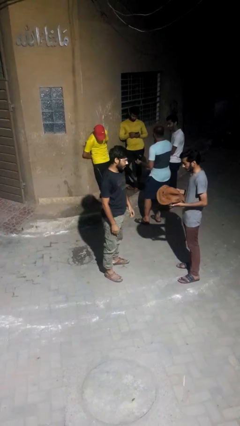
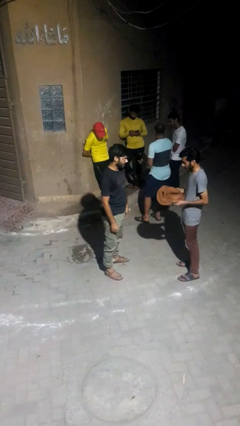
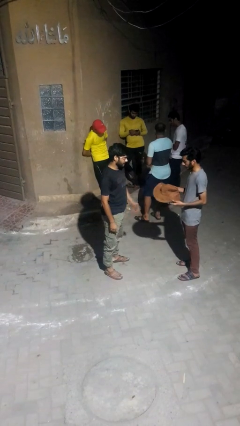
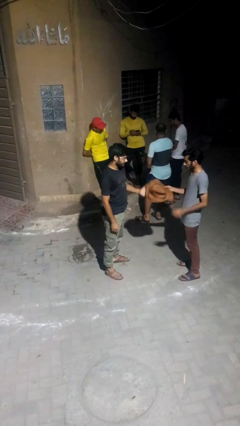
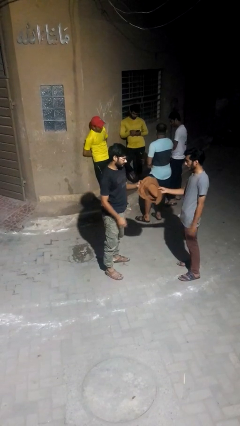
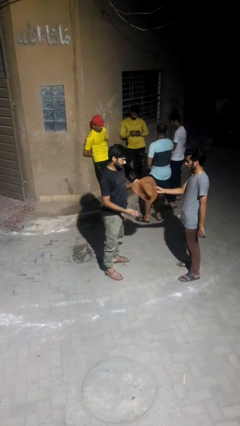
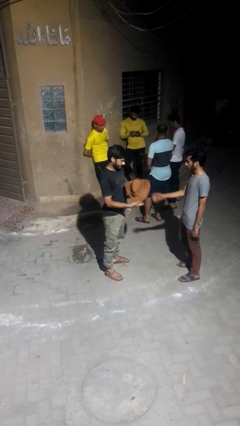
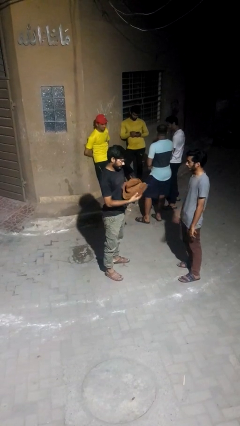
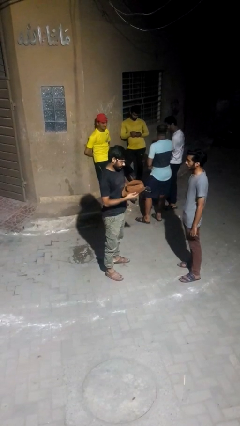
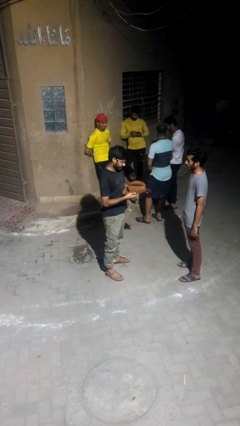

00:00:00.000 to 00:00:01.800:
person transfers object to person

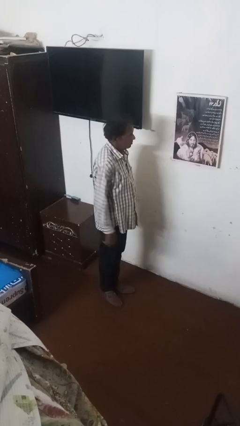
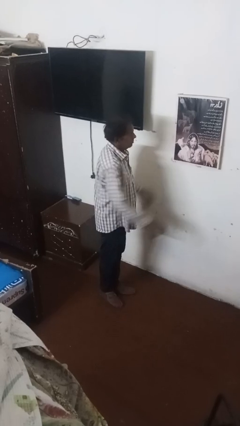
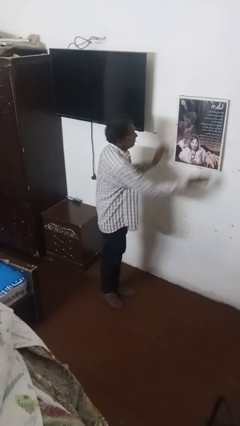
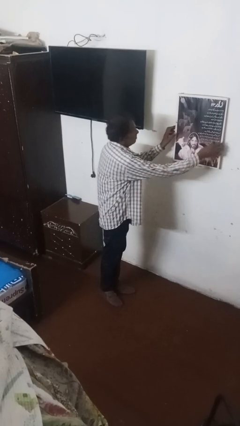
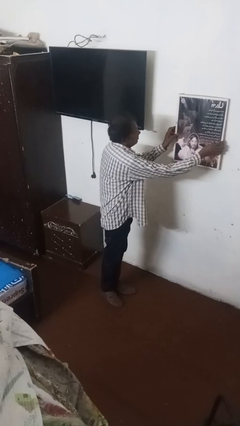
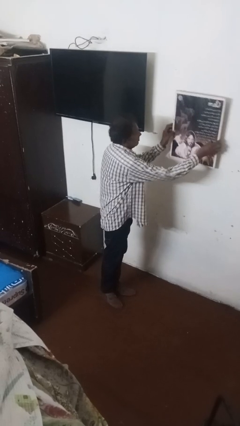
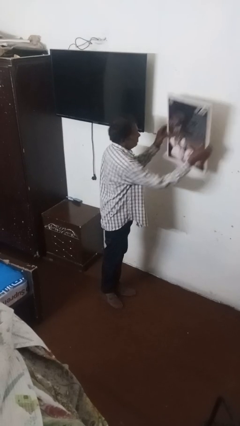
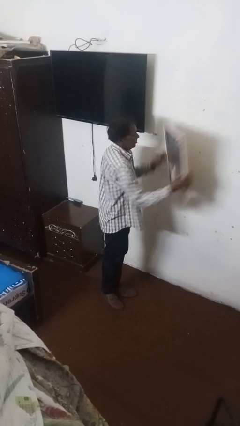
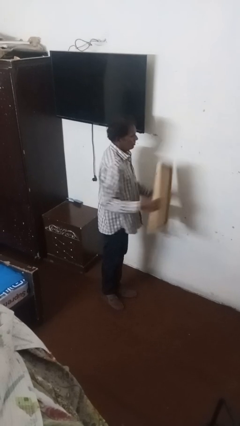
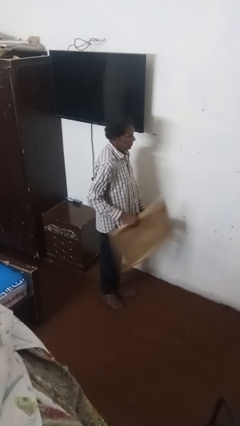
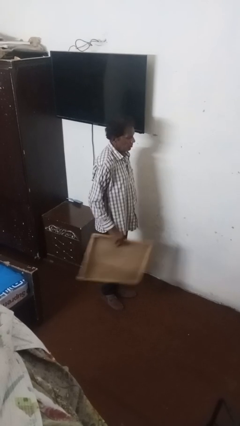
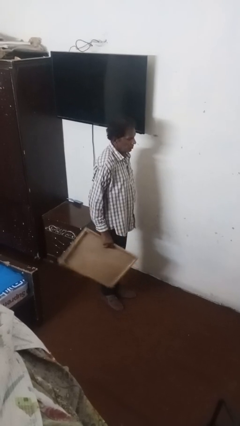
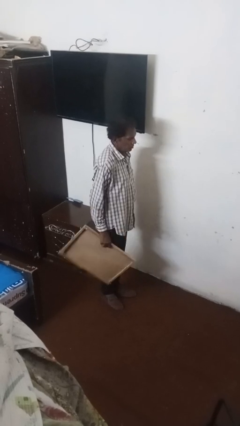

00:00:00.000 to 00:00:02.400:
person takes down picture frame

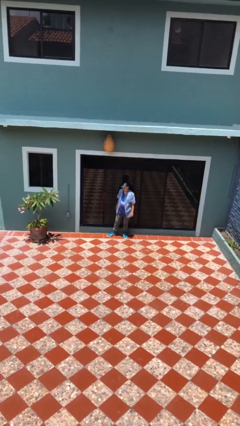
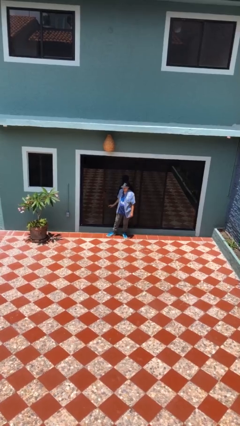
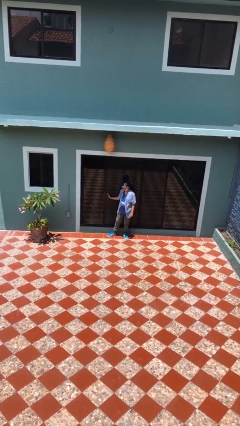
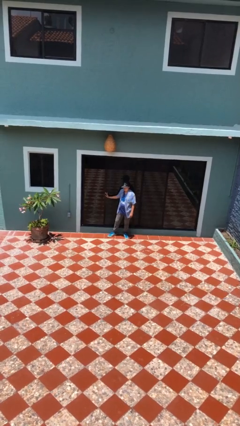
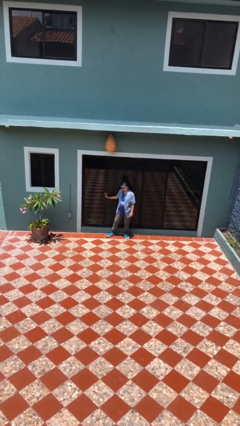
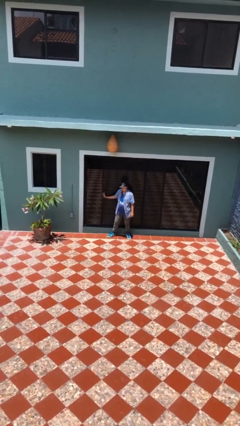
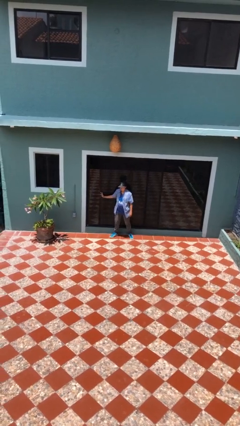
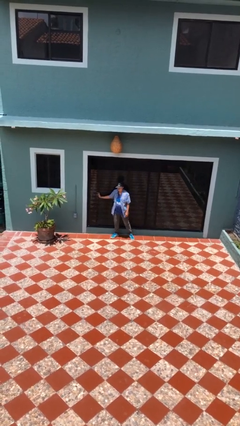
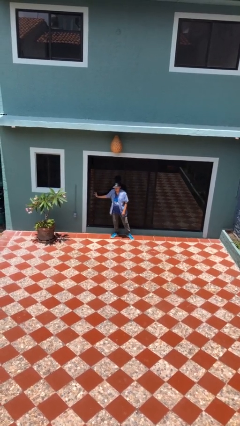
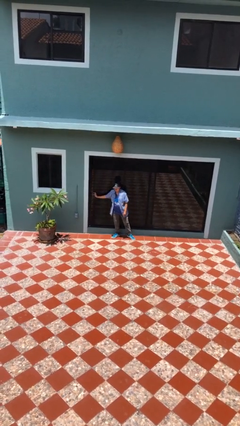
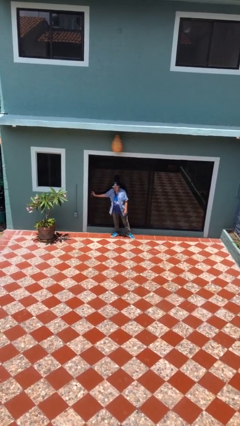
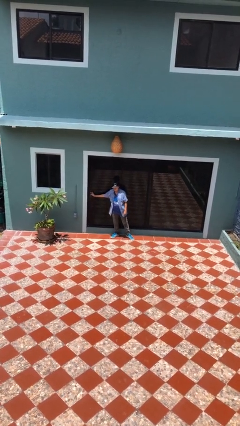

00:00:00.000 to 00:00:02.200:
person closes sliding door

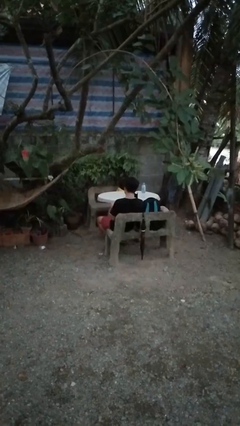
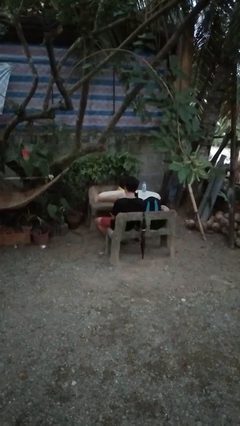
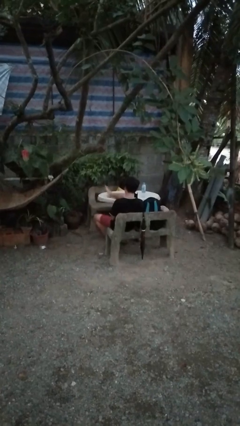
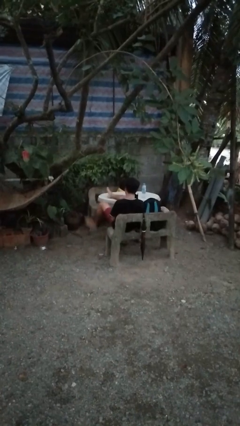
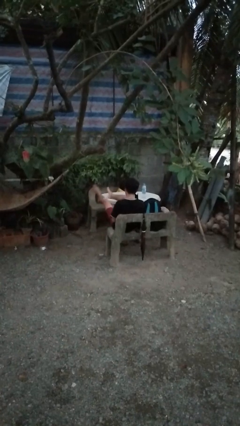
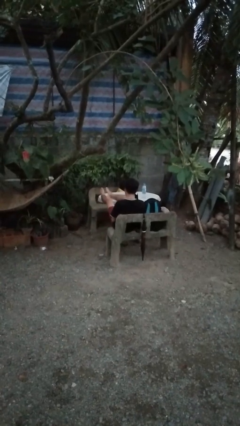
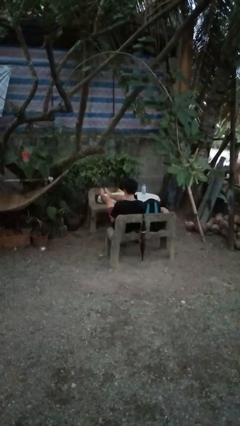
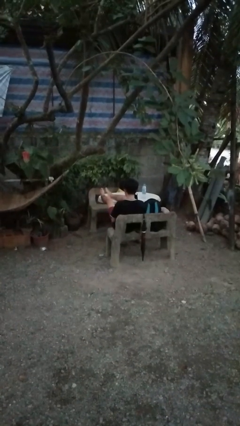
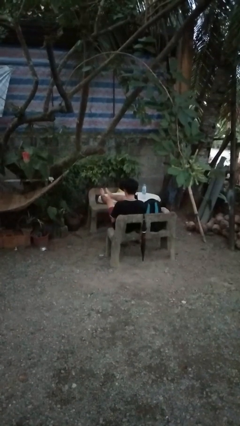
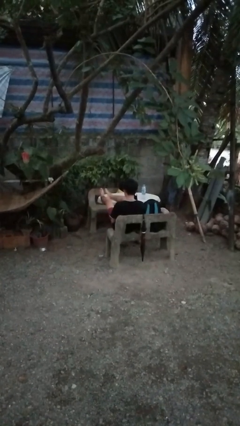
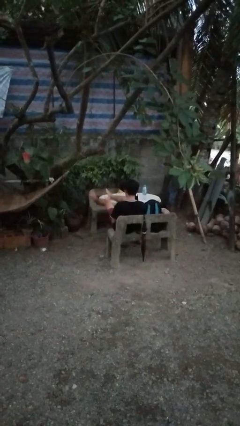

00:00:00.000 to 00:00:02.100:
person puts feet up

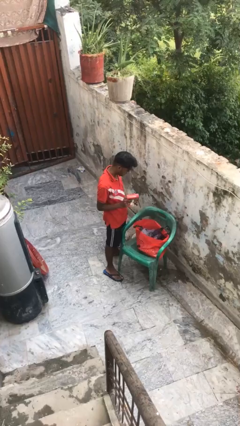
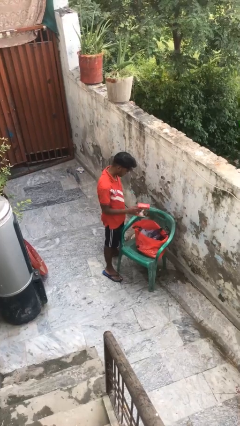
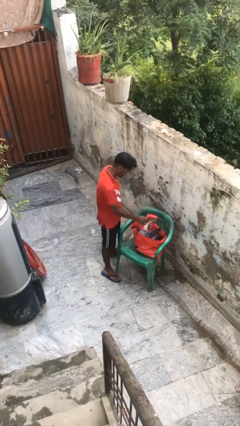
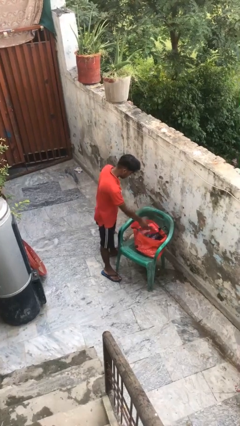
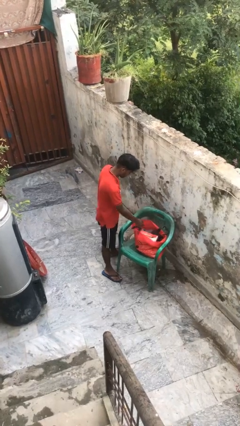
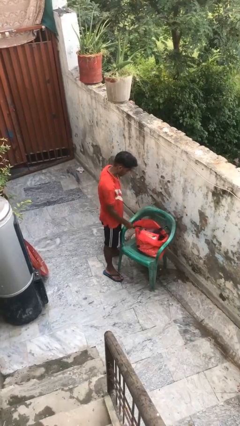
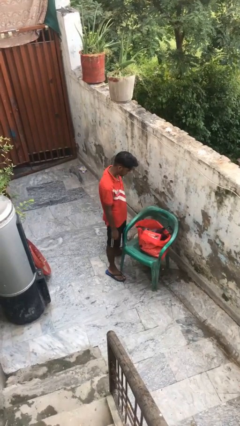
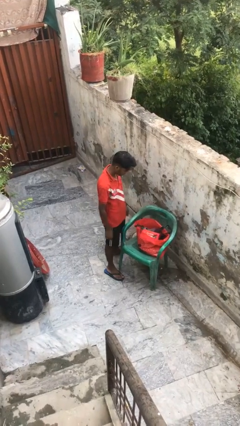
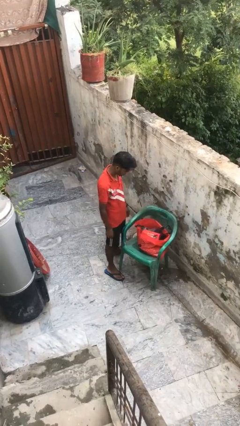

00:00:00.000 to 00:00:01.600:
person puts object into bag

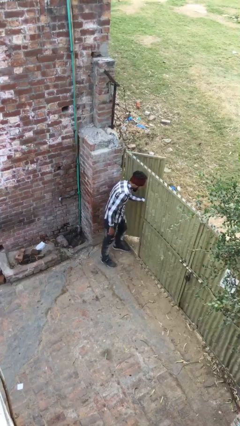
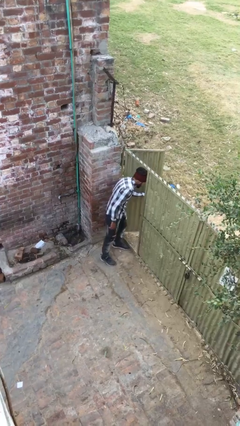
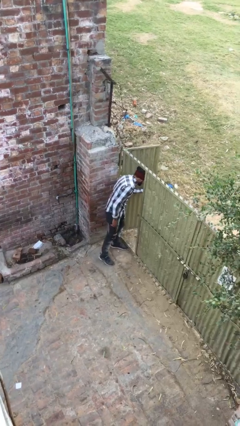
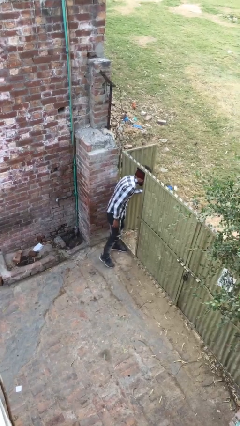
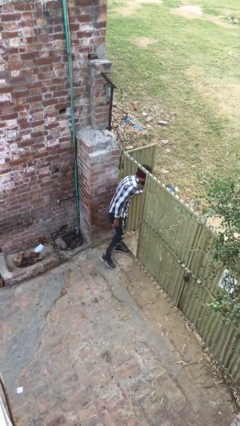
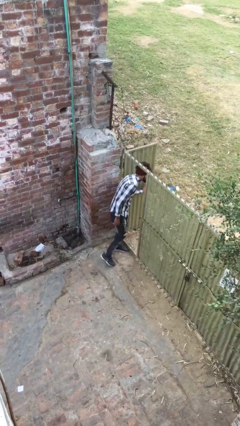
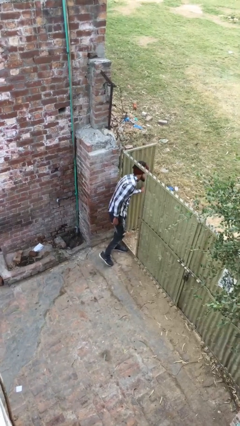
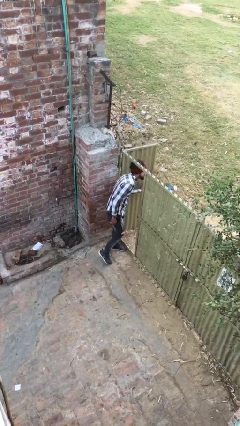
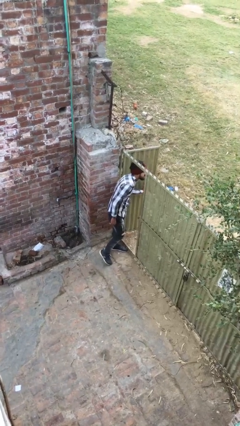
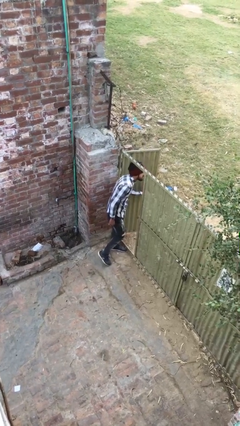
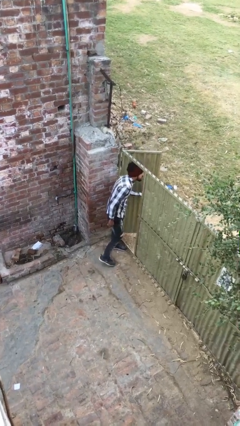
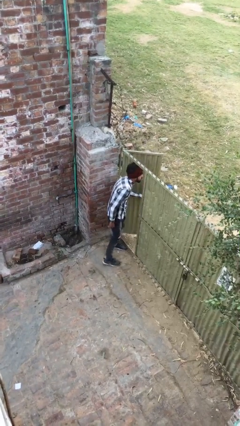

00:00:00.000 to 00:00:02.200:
person opens facility door

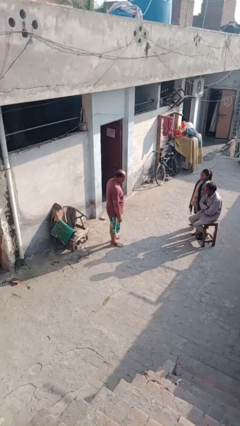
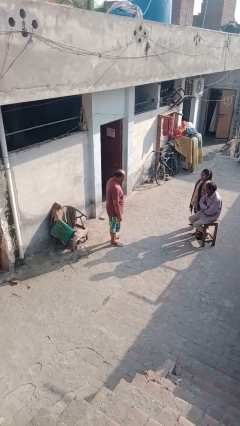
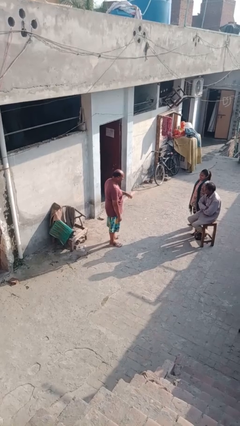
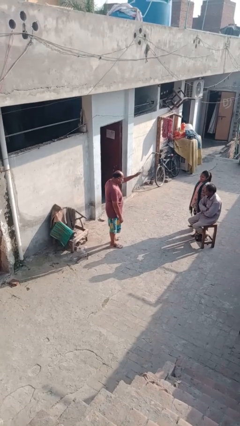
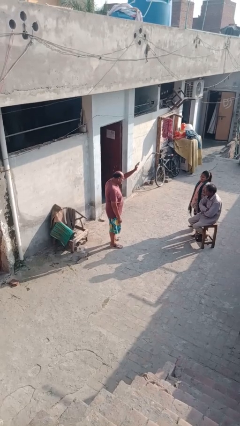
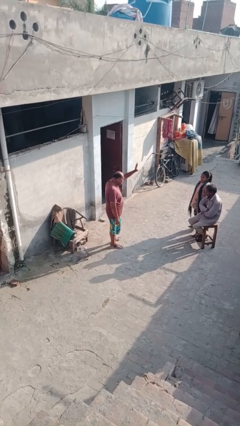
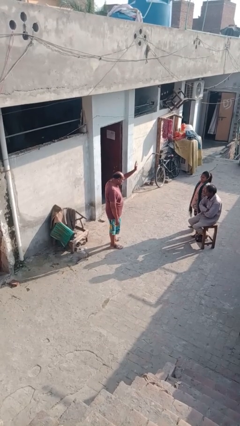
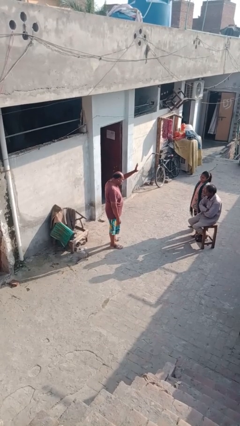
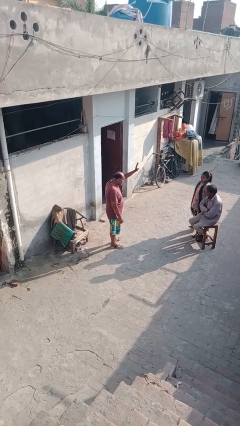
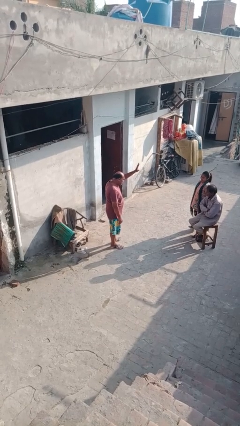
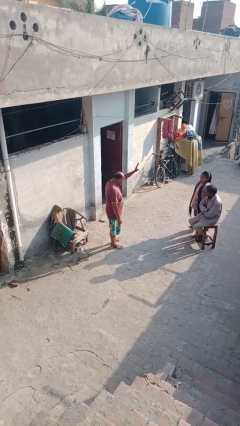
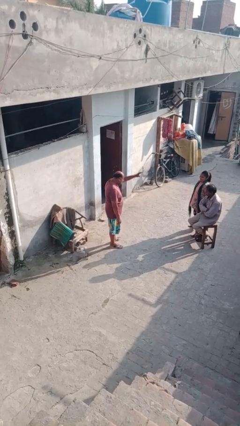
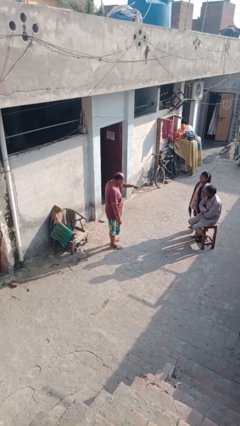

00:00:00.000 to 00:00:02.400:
person waves at person

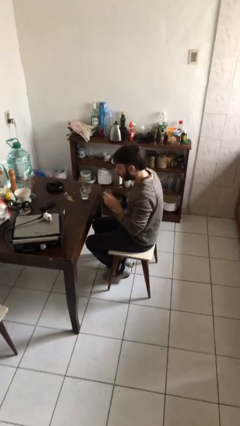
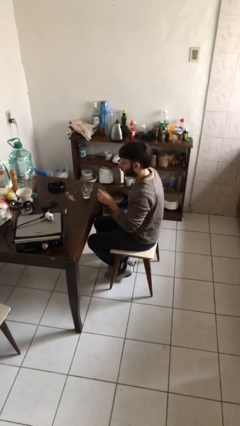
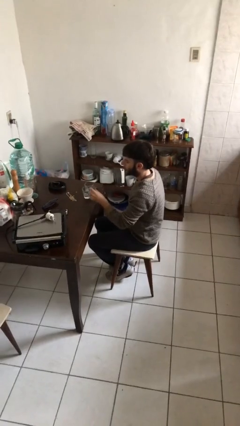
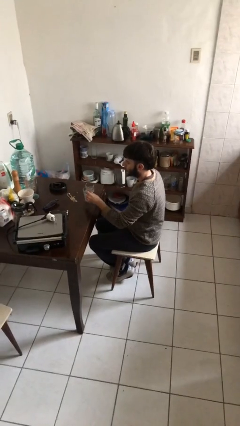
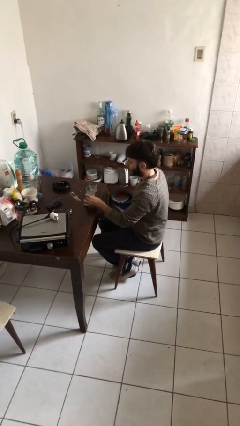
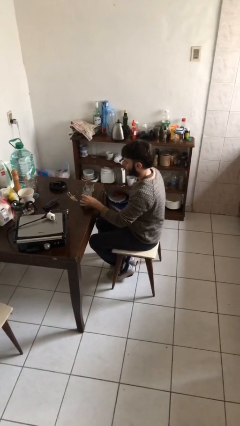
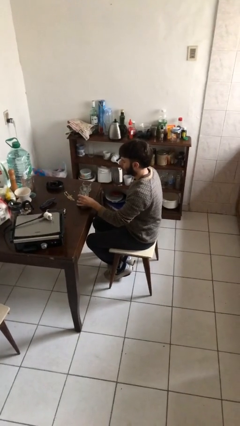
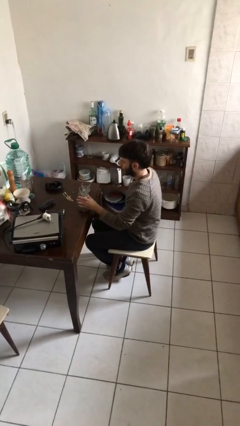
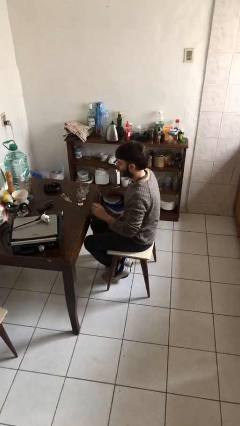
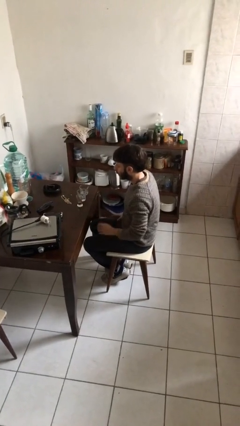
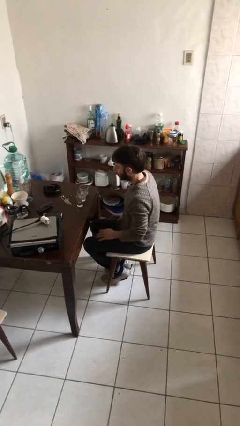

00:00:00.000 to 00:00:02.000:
person puts down object on table
